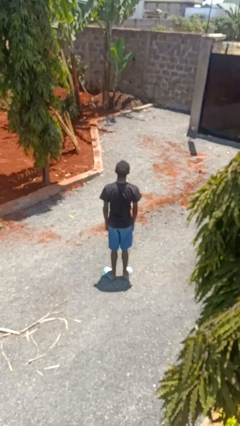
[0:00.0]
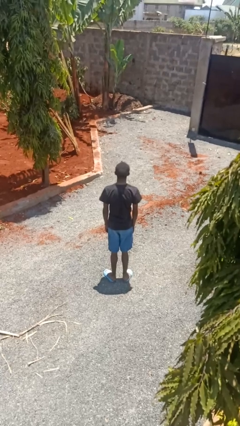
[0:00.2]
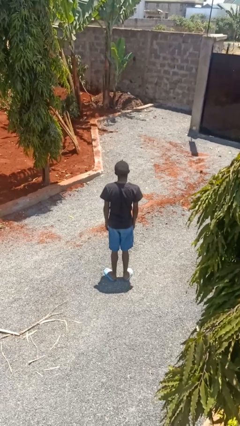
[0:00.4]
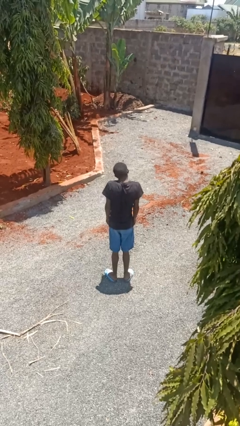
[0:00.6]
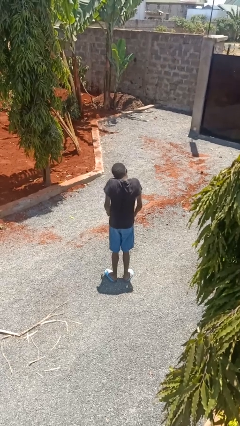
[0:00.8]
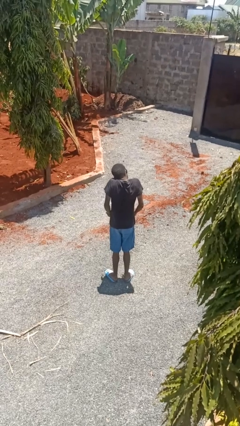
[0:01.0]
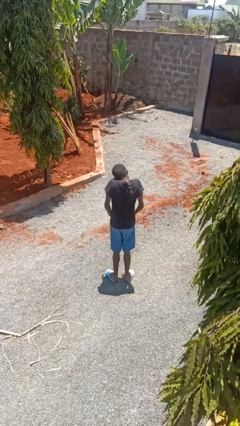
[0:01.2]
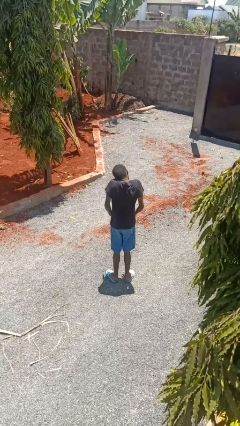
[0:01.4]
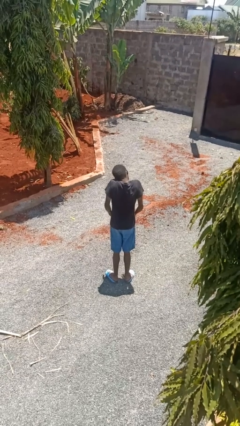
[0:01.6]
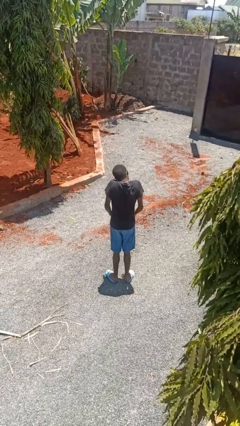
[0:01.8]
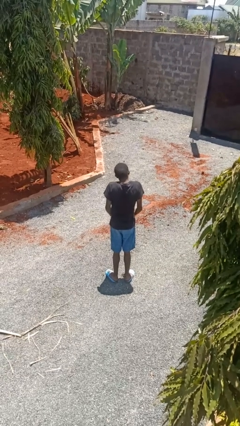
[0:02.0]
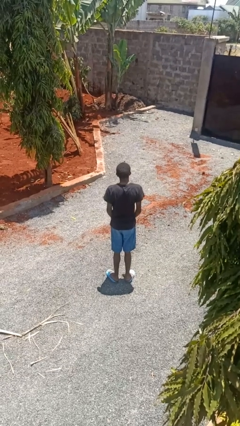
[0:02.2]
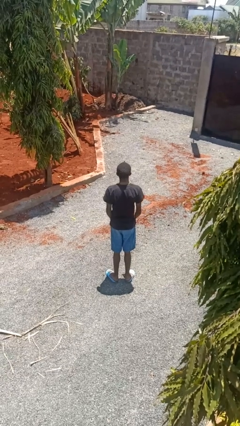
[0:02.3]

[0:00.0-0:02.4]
person shrugs

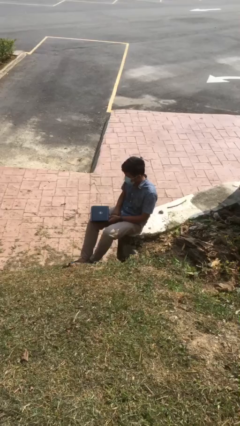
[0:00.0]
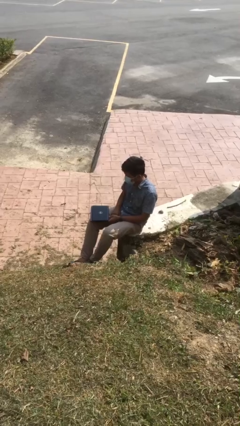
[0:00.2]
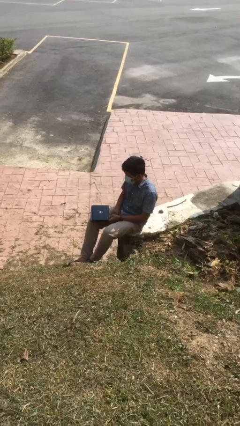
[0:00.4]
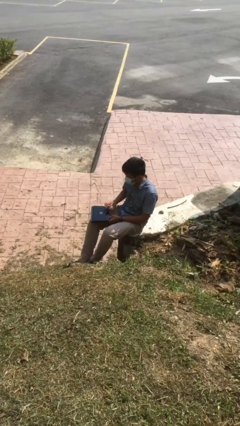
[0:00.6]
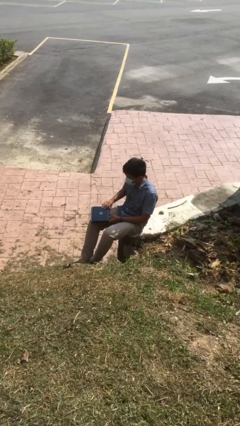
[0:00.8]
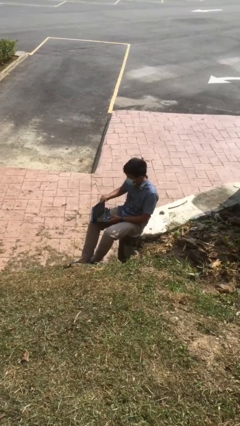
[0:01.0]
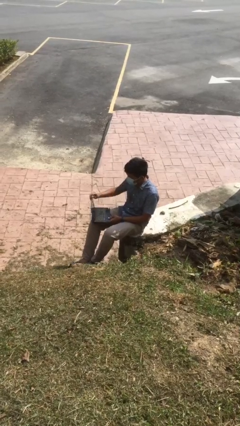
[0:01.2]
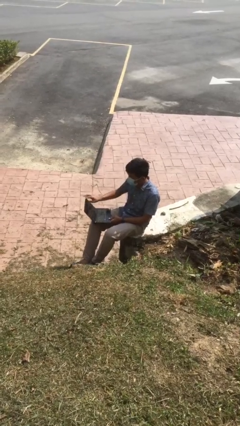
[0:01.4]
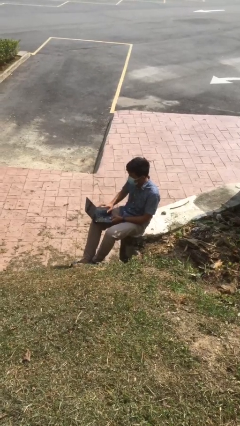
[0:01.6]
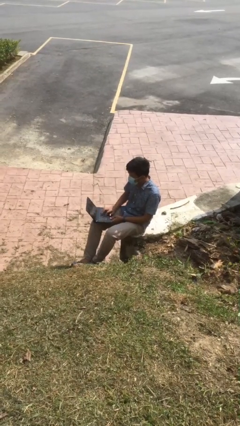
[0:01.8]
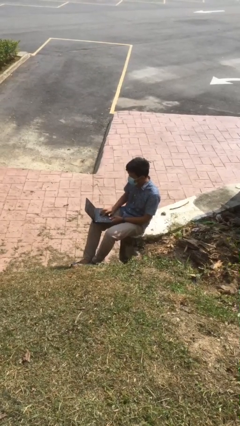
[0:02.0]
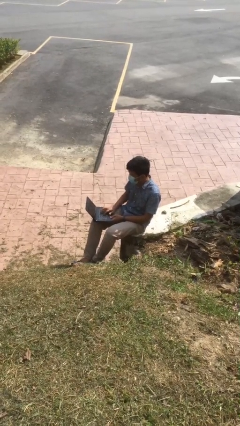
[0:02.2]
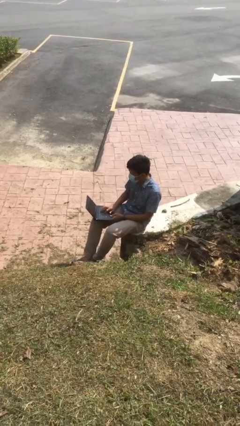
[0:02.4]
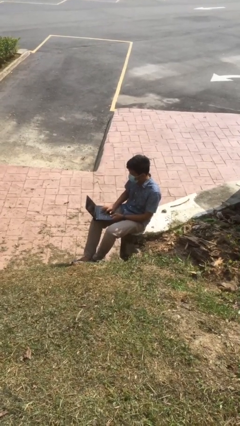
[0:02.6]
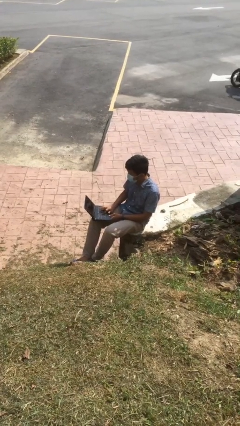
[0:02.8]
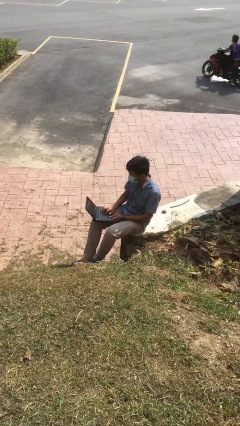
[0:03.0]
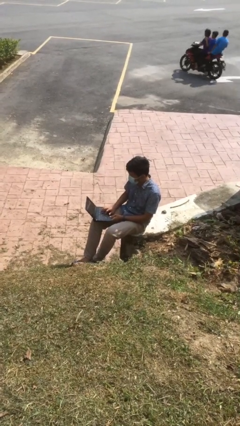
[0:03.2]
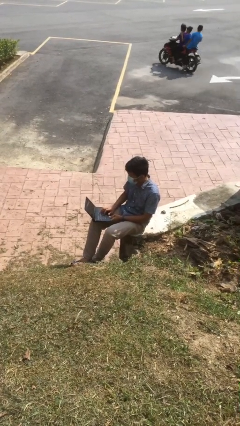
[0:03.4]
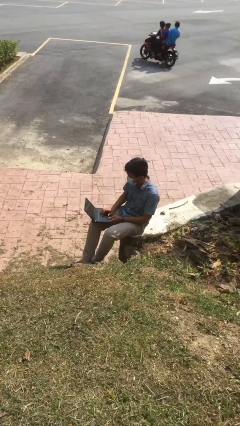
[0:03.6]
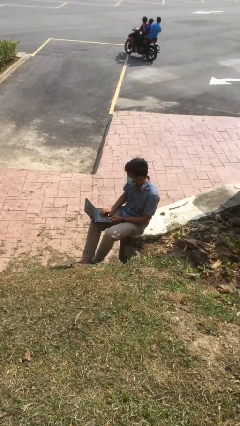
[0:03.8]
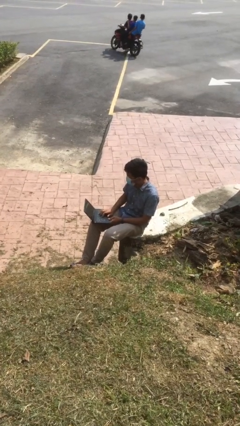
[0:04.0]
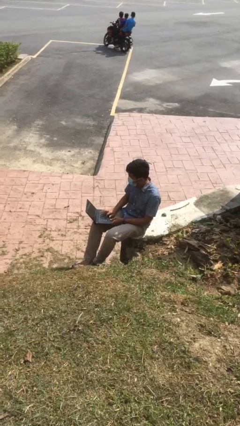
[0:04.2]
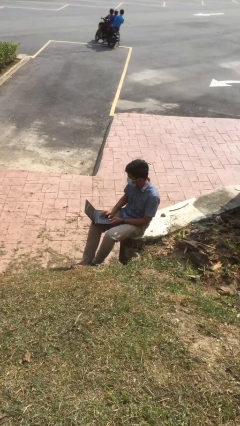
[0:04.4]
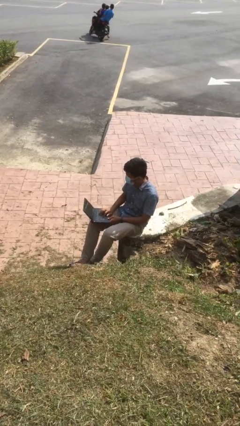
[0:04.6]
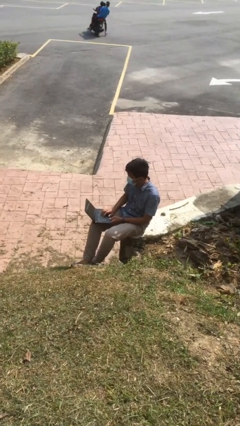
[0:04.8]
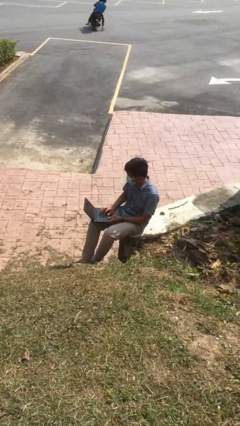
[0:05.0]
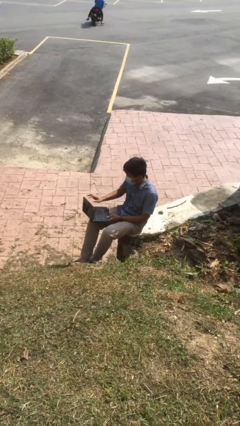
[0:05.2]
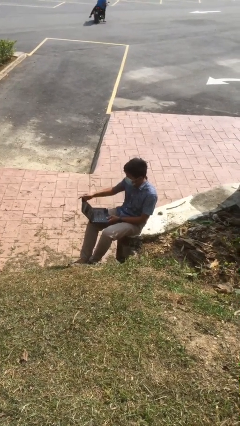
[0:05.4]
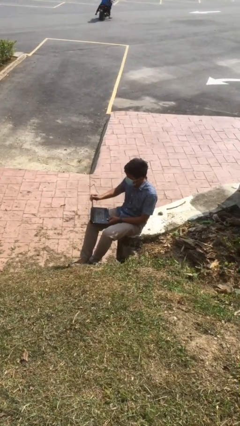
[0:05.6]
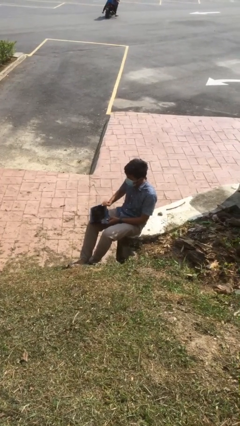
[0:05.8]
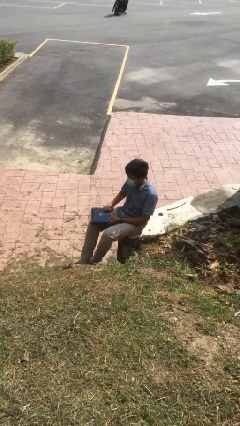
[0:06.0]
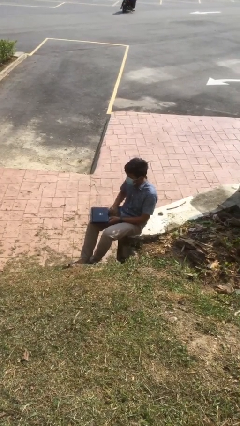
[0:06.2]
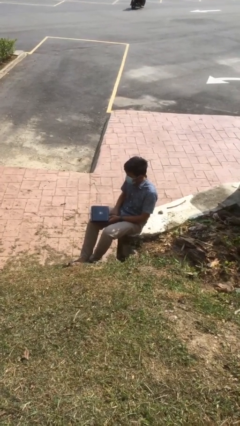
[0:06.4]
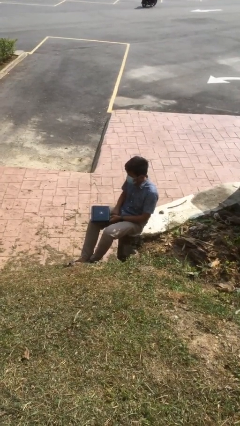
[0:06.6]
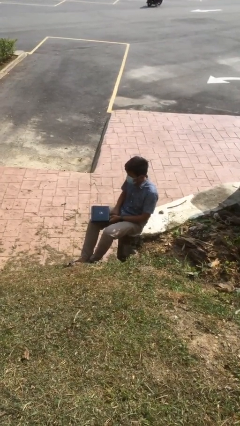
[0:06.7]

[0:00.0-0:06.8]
person interacts with laptop

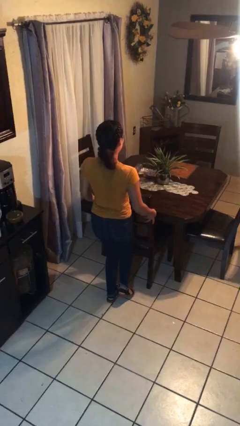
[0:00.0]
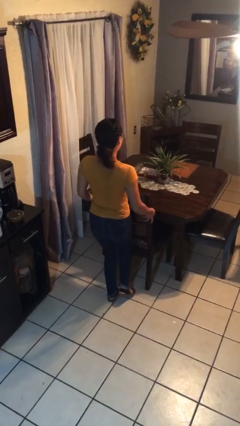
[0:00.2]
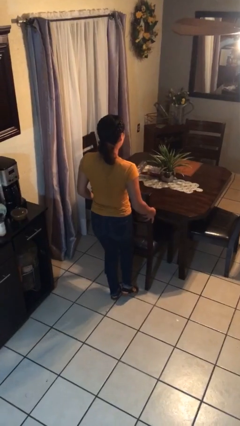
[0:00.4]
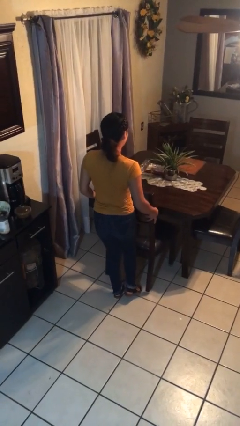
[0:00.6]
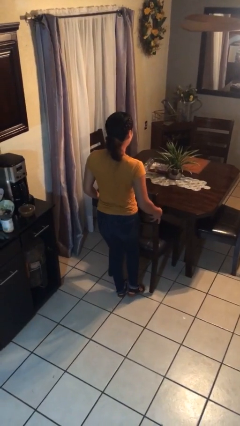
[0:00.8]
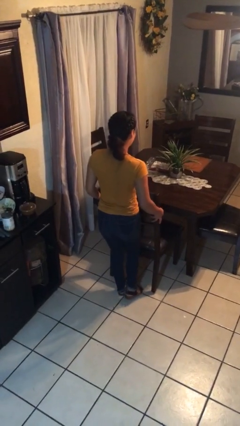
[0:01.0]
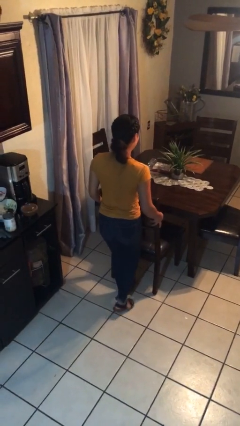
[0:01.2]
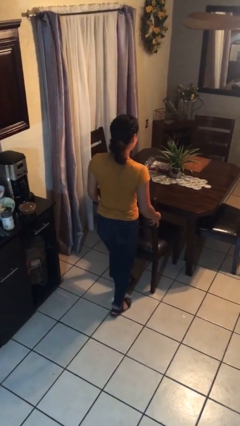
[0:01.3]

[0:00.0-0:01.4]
person pulls out chair

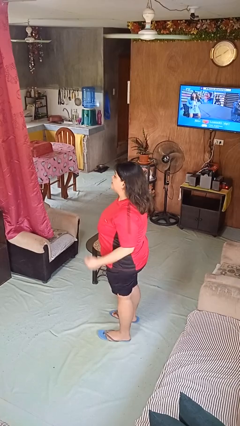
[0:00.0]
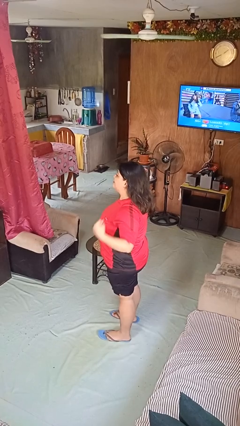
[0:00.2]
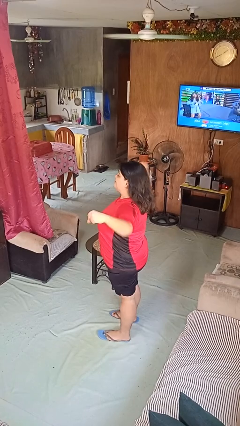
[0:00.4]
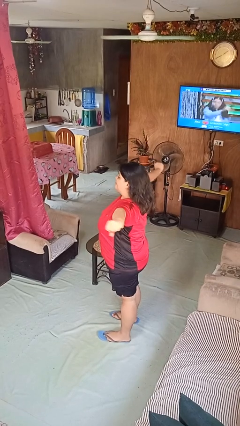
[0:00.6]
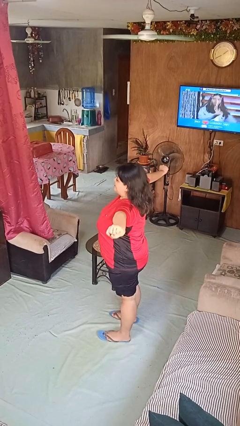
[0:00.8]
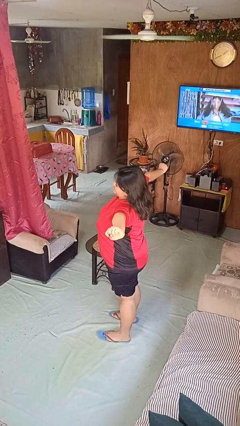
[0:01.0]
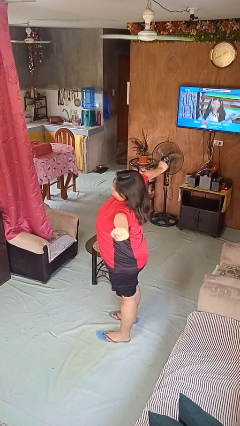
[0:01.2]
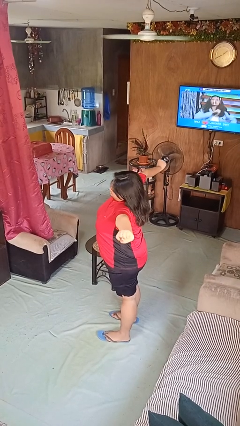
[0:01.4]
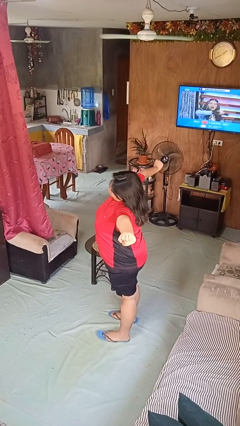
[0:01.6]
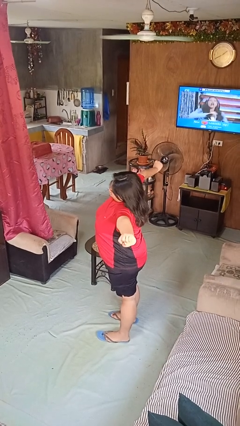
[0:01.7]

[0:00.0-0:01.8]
person stretches arms to side

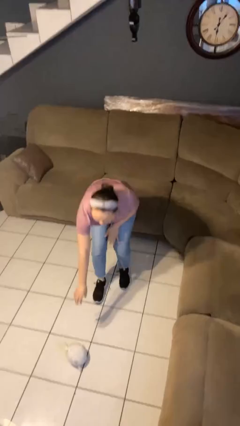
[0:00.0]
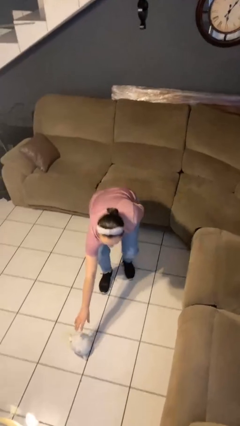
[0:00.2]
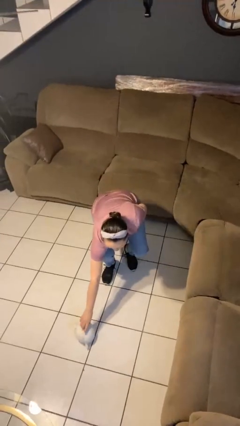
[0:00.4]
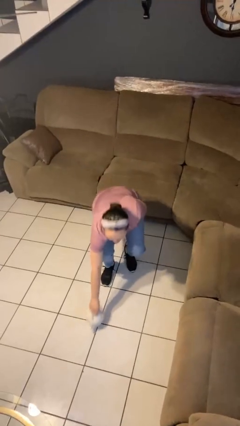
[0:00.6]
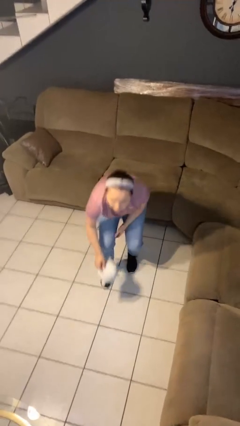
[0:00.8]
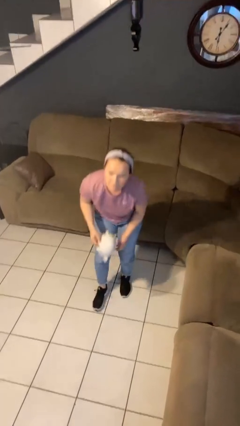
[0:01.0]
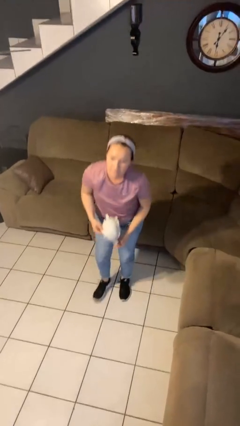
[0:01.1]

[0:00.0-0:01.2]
person picks up object from floor

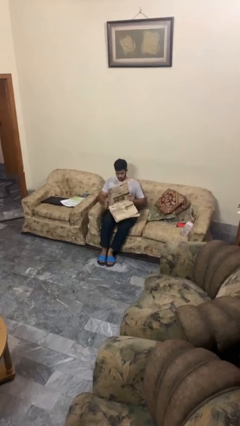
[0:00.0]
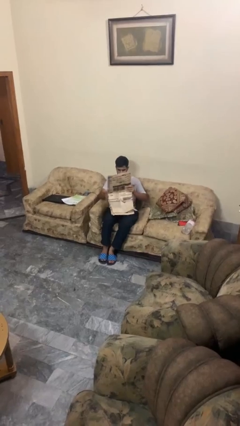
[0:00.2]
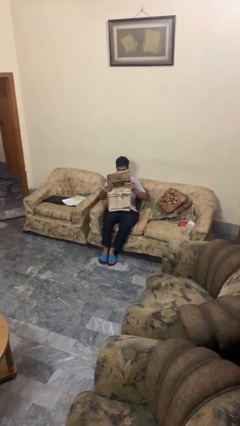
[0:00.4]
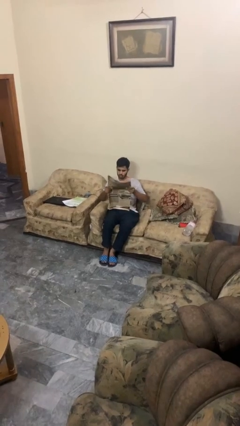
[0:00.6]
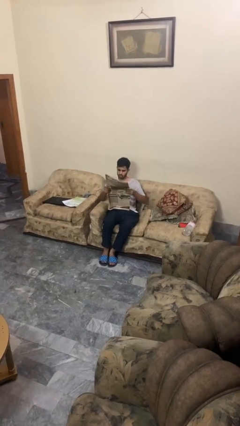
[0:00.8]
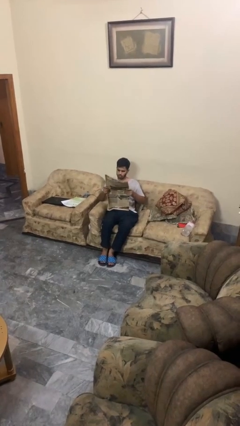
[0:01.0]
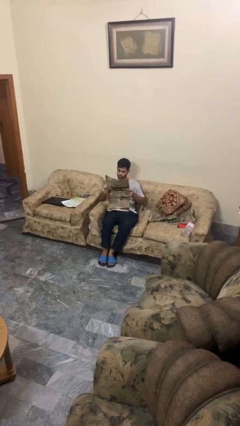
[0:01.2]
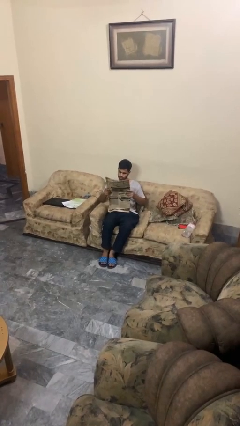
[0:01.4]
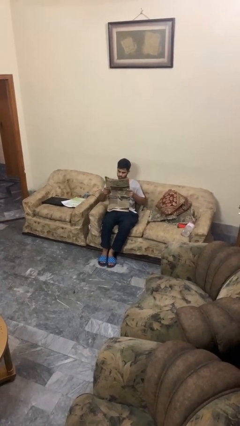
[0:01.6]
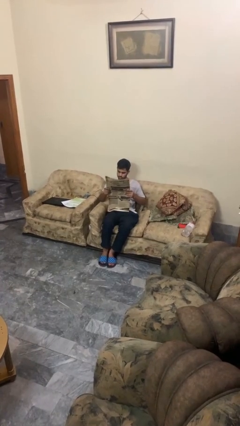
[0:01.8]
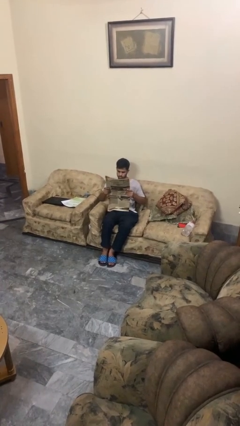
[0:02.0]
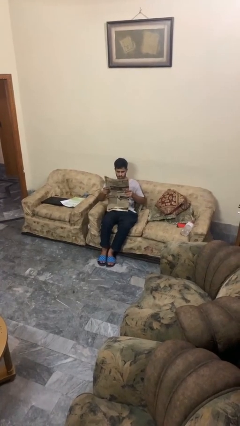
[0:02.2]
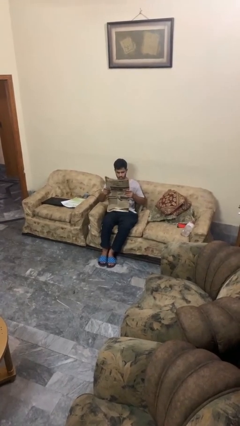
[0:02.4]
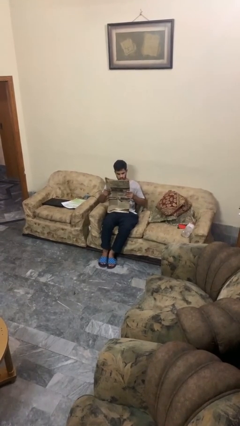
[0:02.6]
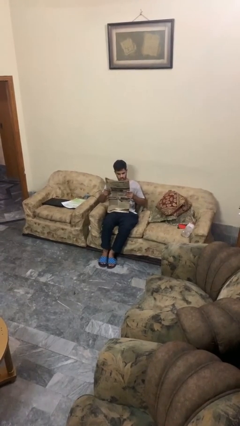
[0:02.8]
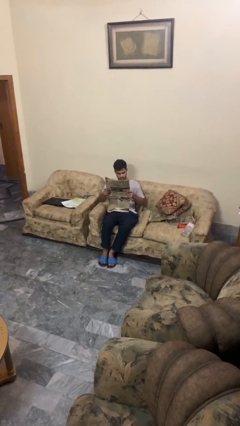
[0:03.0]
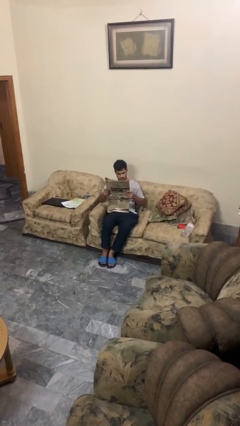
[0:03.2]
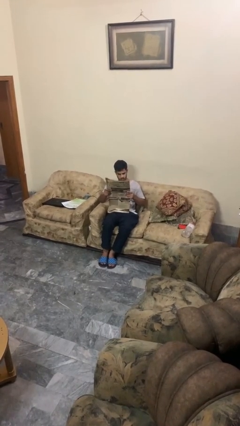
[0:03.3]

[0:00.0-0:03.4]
person reads newspaper

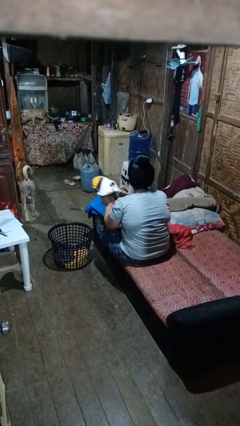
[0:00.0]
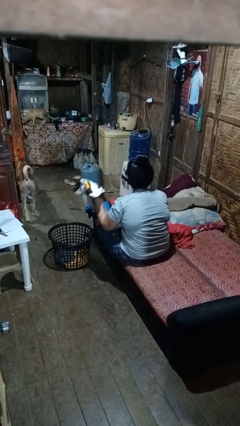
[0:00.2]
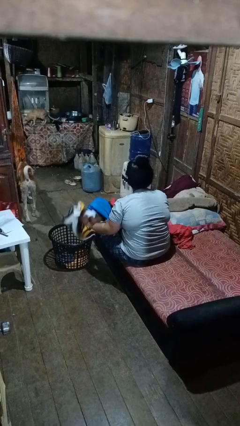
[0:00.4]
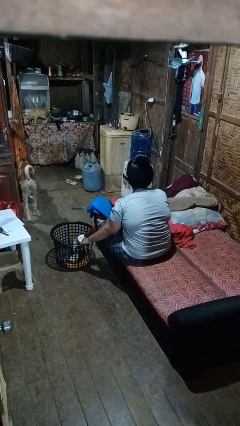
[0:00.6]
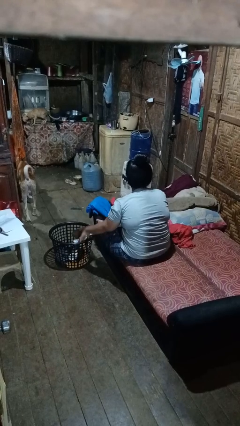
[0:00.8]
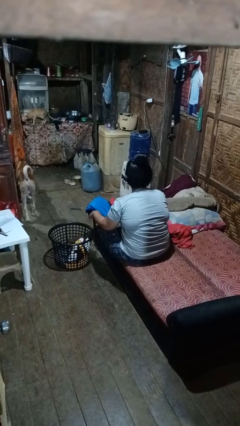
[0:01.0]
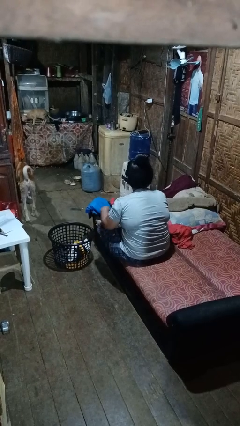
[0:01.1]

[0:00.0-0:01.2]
person puts object into basket
